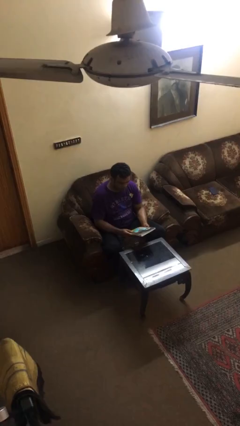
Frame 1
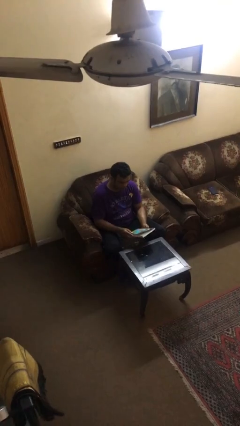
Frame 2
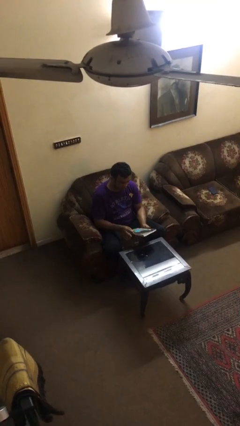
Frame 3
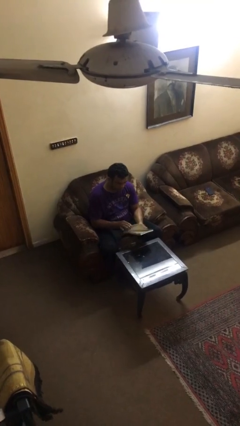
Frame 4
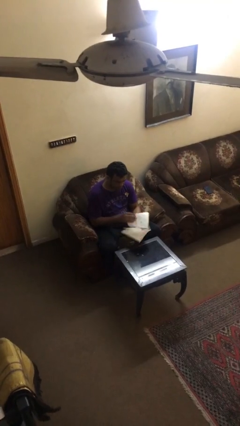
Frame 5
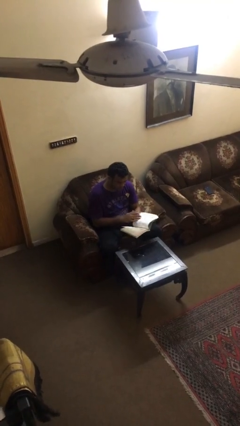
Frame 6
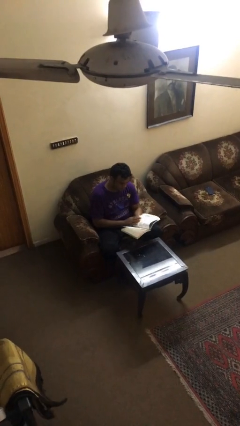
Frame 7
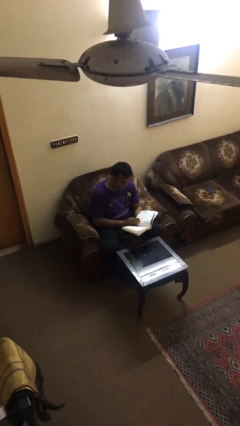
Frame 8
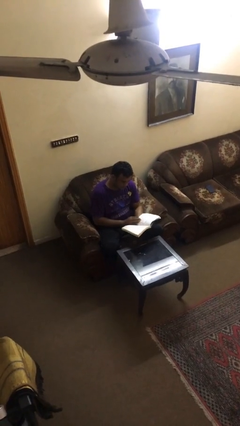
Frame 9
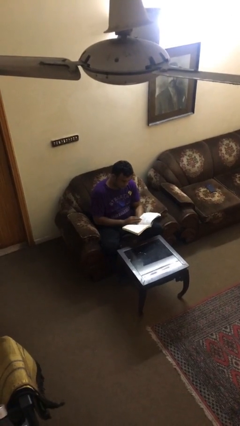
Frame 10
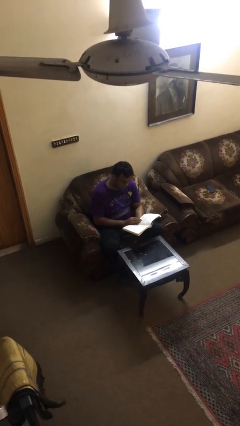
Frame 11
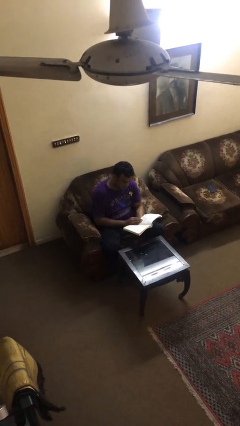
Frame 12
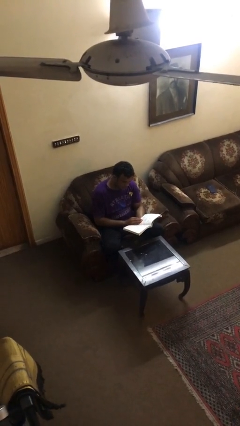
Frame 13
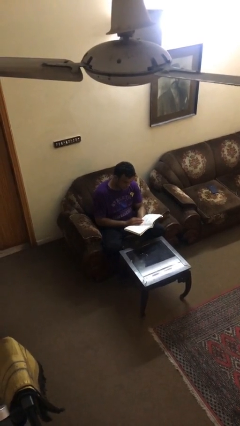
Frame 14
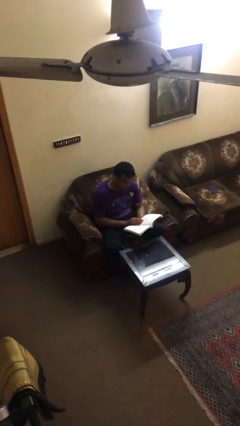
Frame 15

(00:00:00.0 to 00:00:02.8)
person reads document

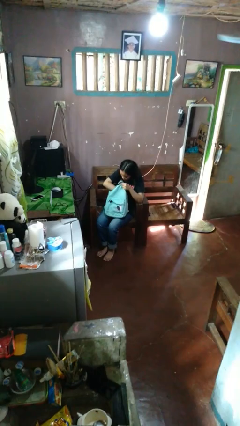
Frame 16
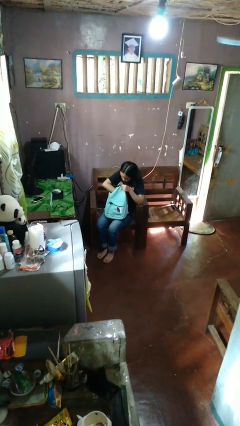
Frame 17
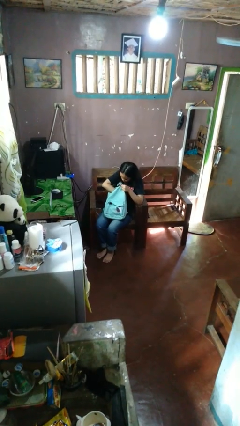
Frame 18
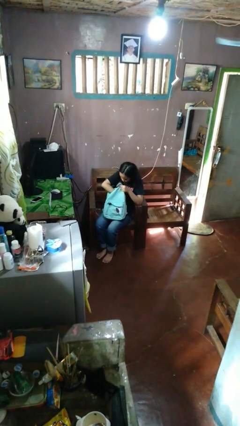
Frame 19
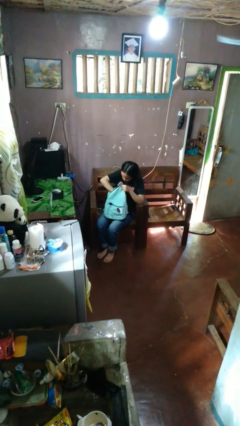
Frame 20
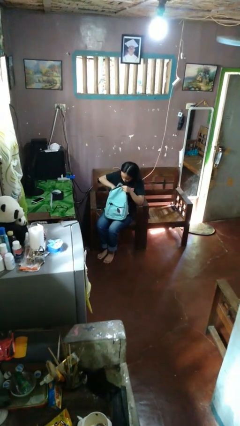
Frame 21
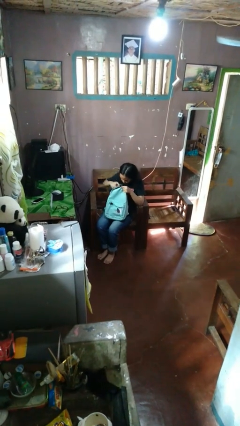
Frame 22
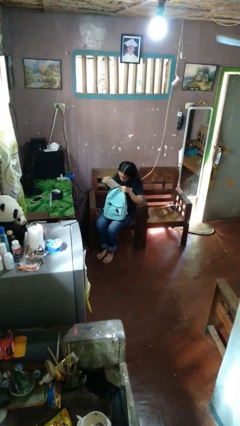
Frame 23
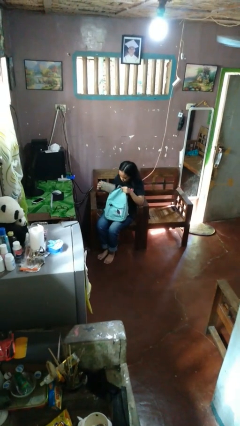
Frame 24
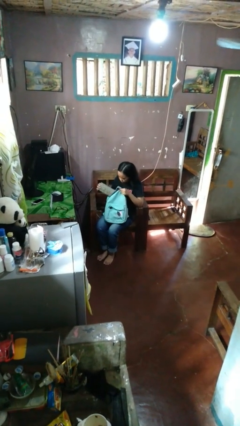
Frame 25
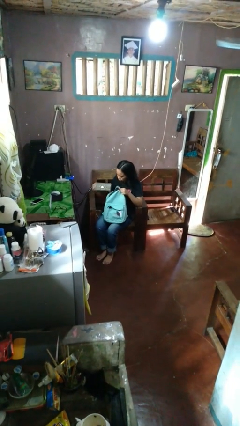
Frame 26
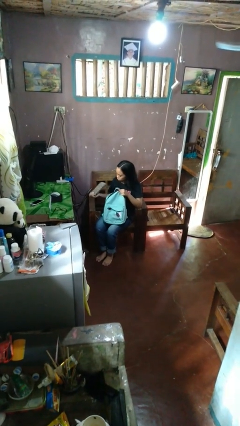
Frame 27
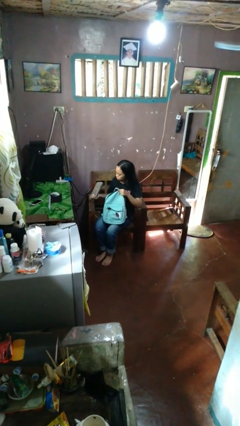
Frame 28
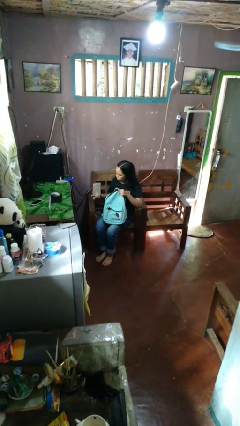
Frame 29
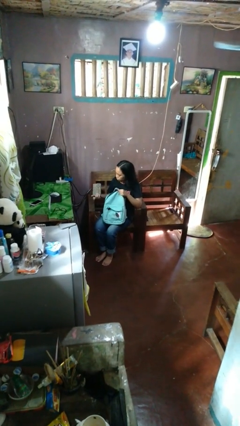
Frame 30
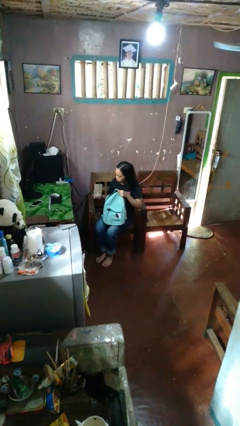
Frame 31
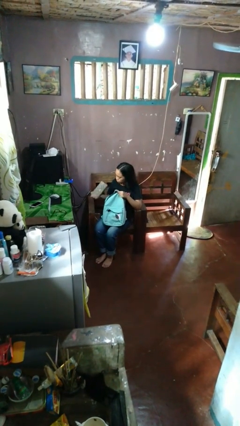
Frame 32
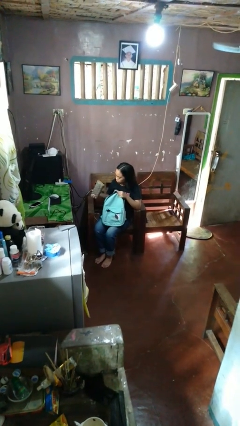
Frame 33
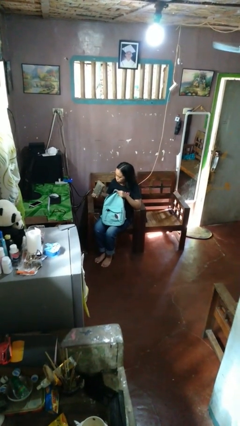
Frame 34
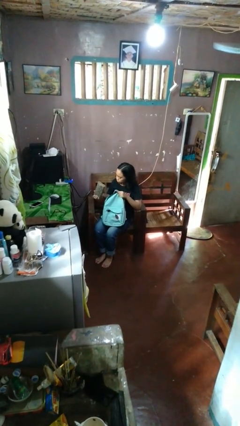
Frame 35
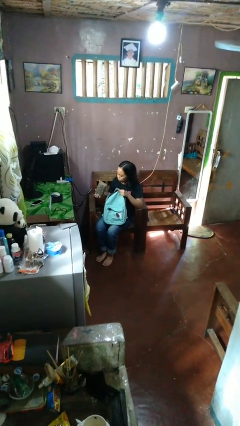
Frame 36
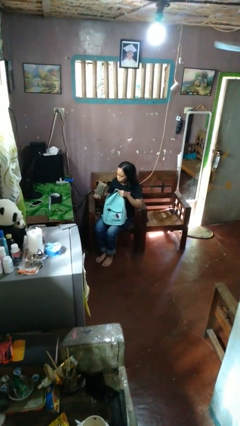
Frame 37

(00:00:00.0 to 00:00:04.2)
person takes object from backpack

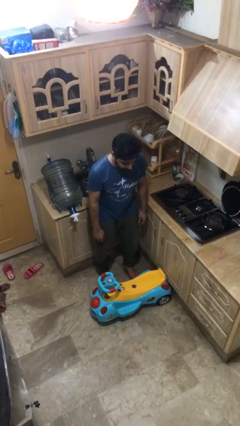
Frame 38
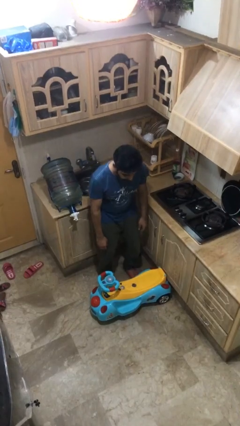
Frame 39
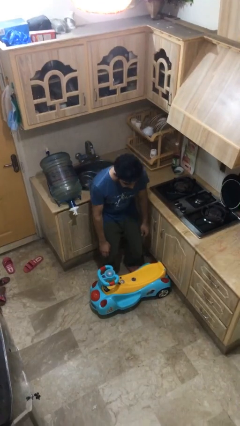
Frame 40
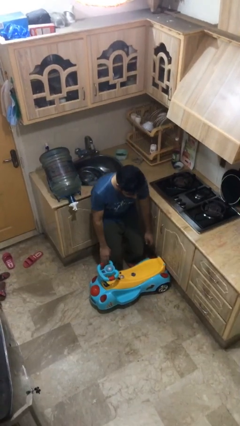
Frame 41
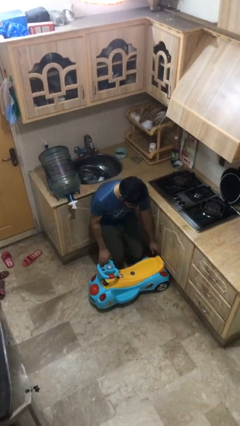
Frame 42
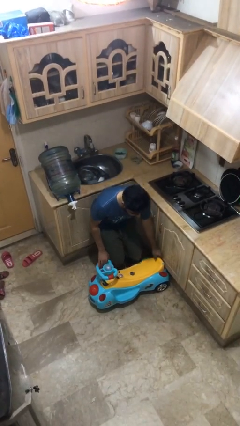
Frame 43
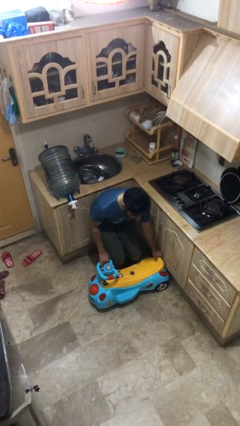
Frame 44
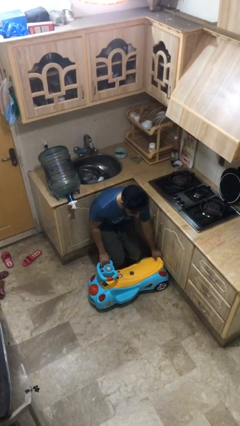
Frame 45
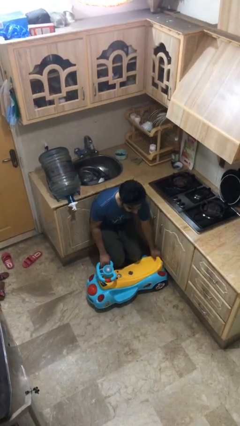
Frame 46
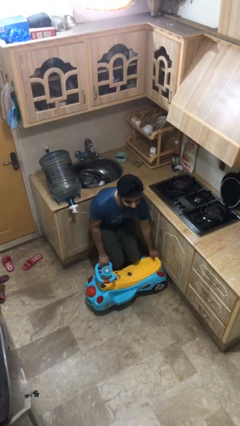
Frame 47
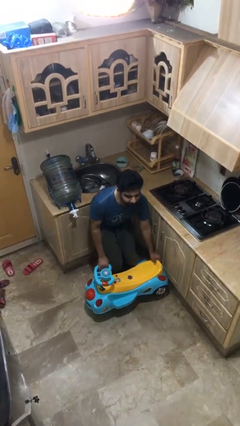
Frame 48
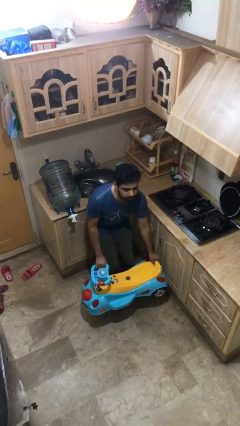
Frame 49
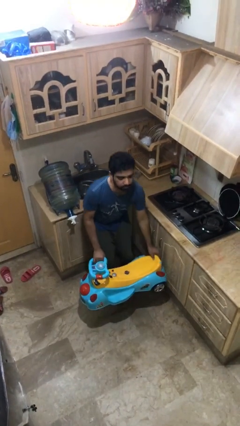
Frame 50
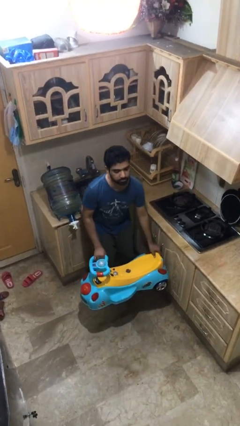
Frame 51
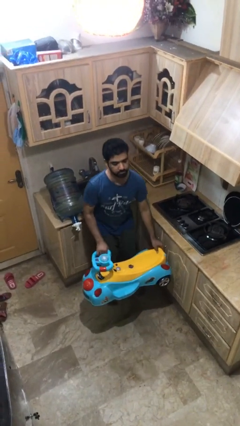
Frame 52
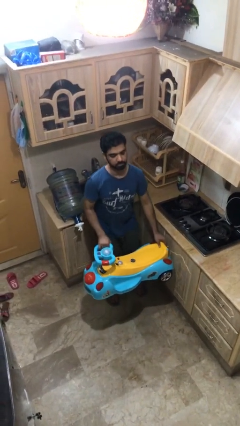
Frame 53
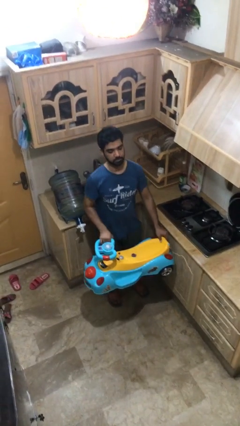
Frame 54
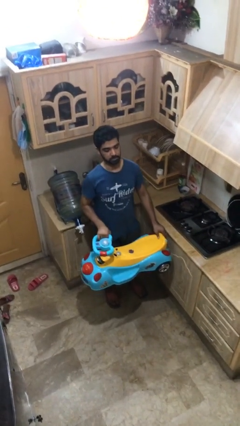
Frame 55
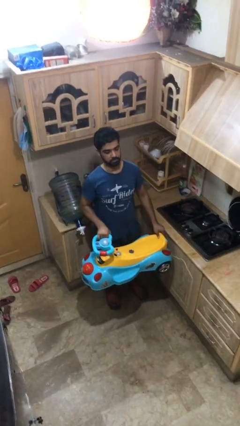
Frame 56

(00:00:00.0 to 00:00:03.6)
person picks up object from floor

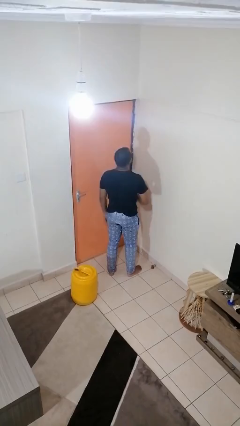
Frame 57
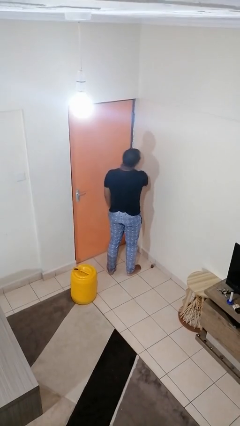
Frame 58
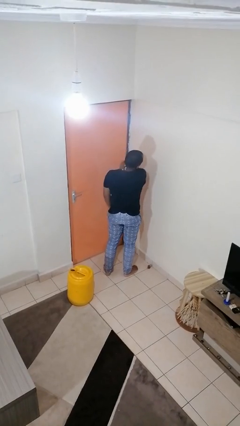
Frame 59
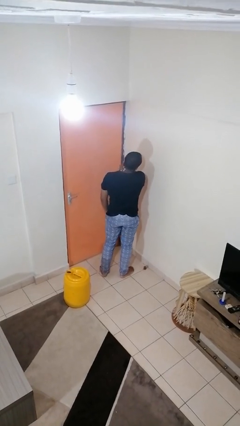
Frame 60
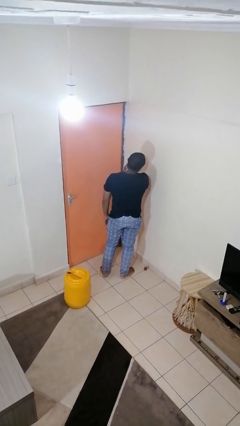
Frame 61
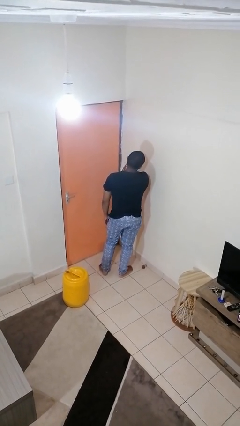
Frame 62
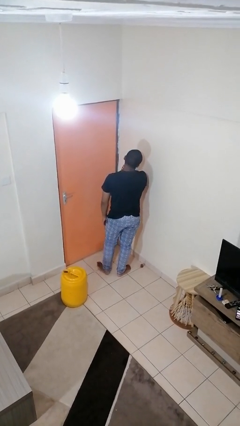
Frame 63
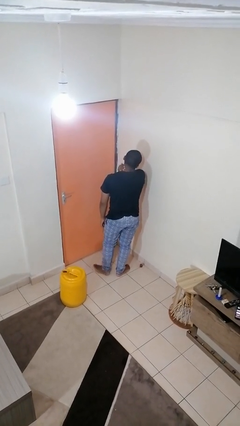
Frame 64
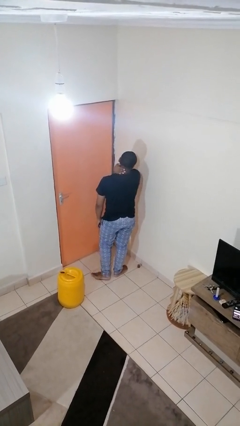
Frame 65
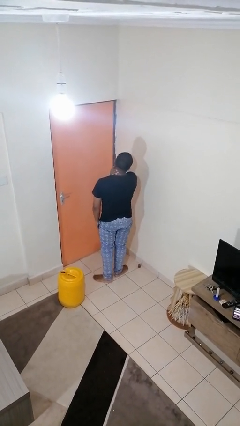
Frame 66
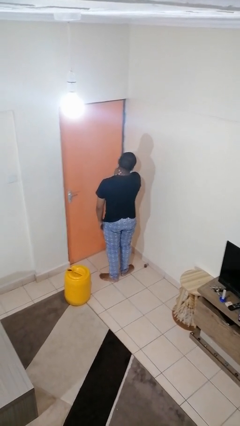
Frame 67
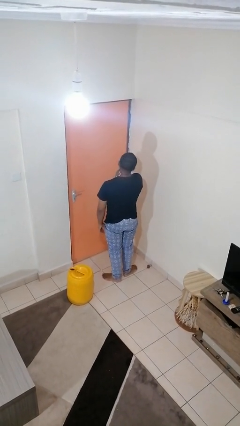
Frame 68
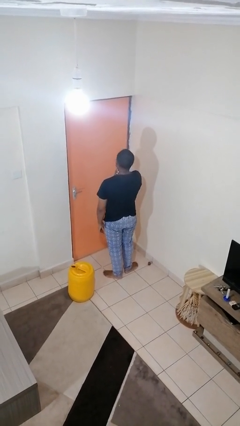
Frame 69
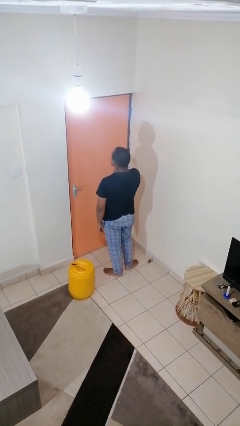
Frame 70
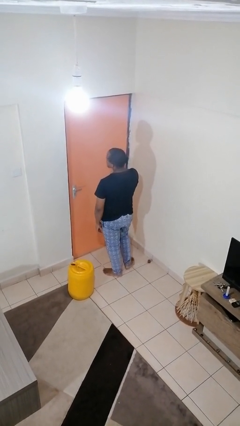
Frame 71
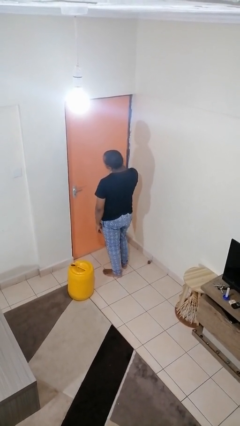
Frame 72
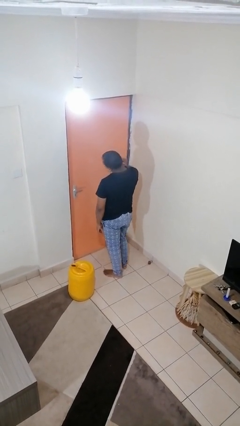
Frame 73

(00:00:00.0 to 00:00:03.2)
person rubs neck

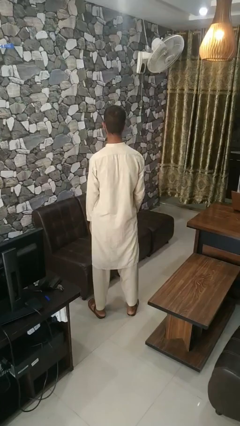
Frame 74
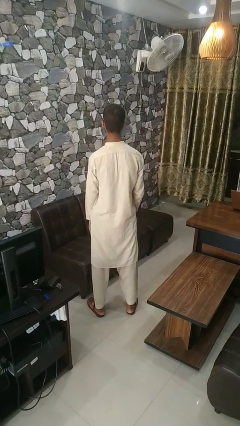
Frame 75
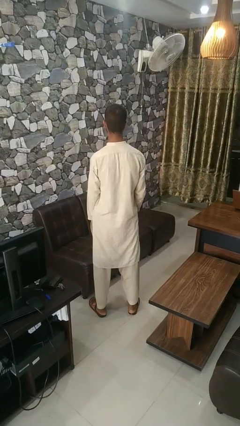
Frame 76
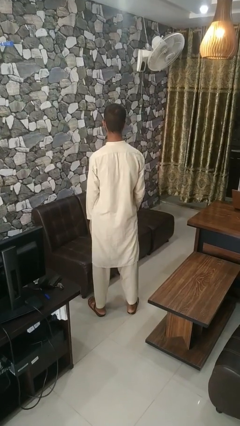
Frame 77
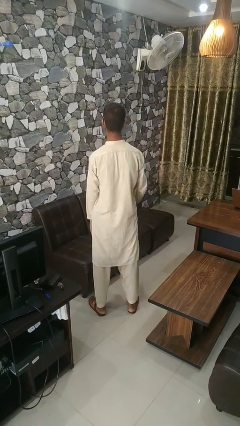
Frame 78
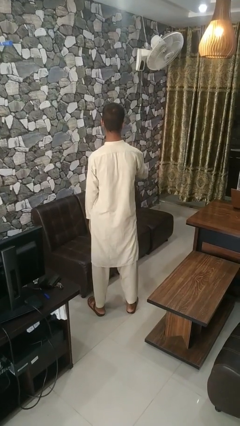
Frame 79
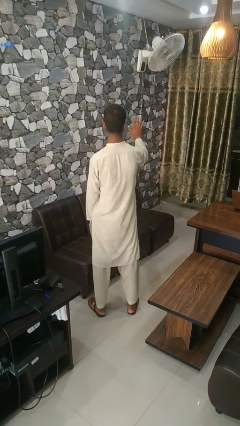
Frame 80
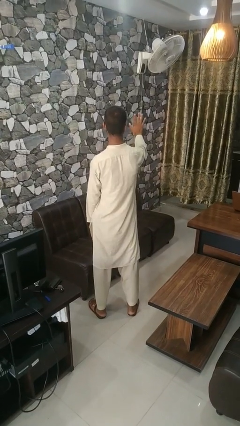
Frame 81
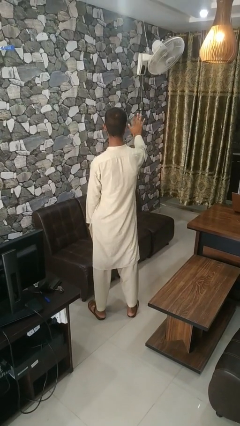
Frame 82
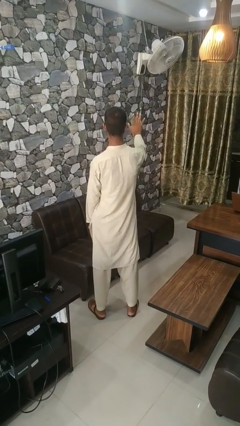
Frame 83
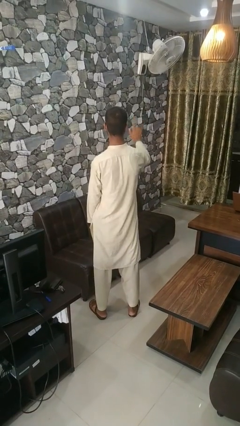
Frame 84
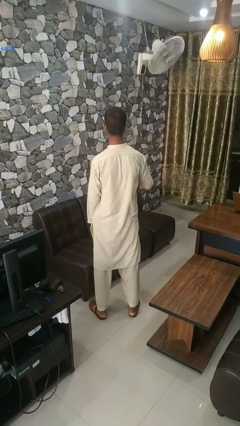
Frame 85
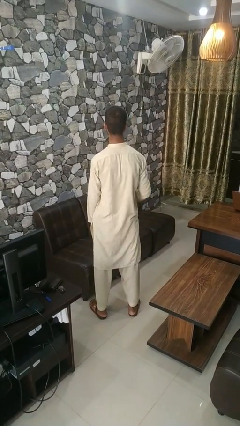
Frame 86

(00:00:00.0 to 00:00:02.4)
person gestures number five

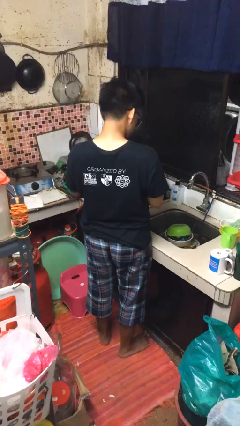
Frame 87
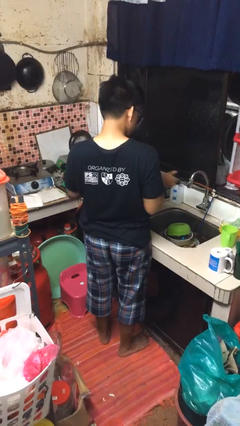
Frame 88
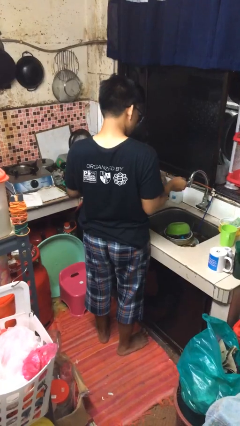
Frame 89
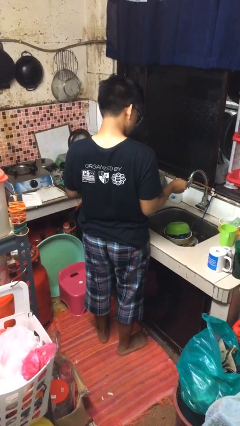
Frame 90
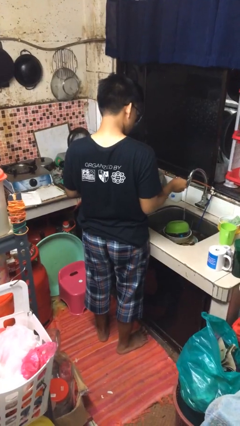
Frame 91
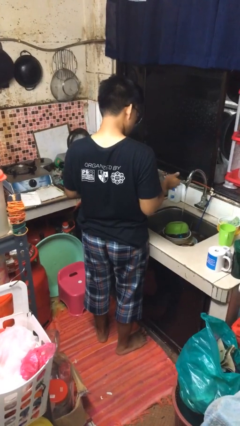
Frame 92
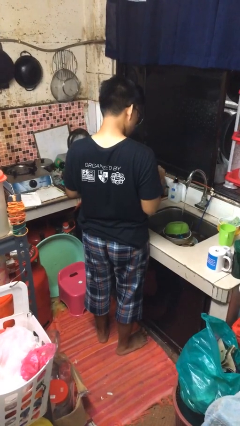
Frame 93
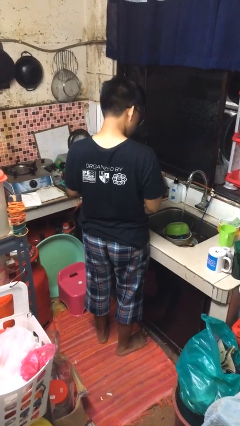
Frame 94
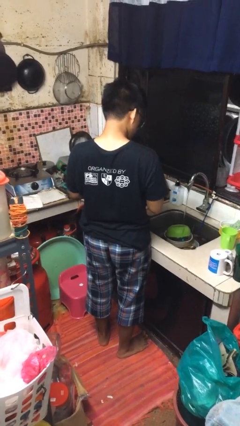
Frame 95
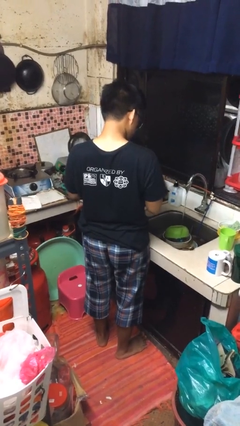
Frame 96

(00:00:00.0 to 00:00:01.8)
person turns on faucet
